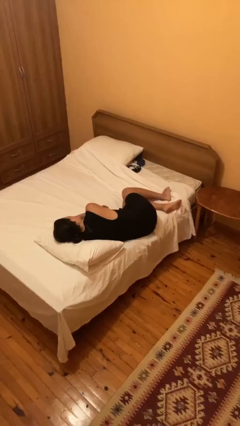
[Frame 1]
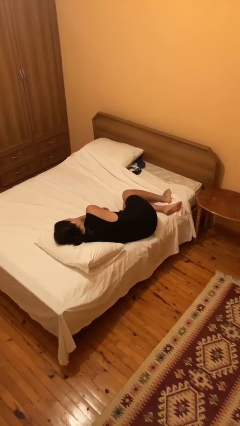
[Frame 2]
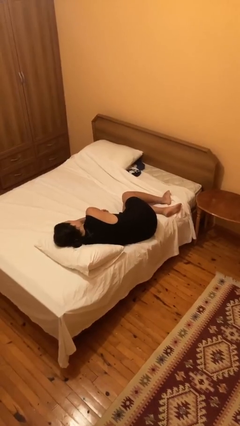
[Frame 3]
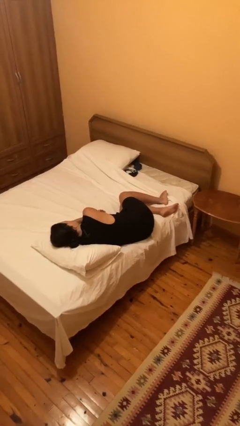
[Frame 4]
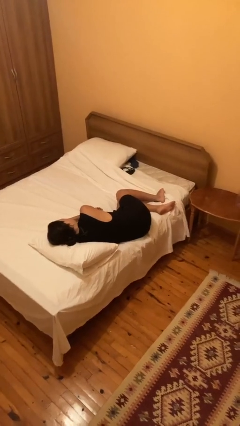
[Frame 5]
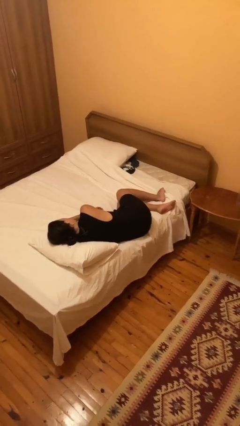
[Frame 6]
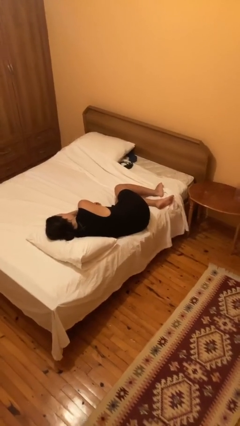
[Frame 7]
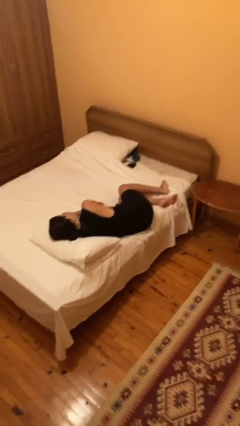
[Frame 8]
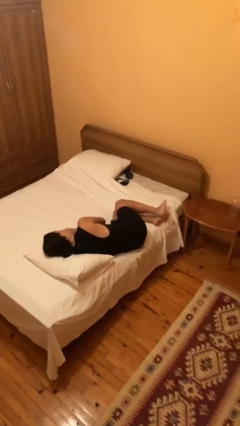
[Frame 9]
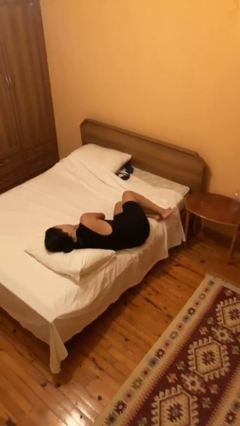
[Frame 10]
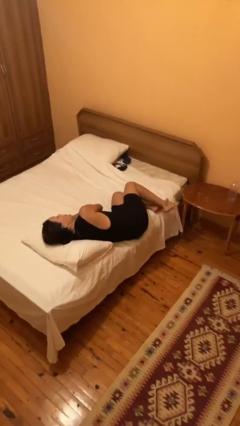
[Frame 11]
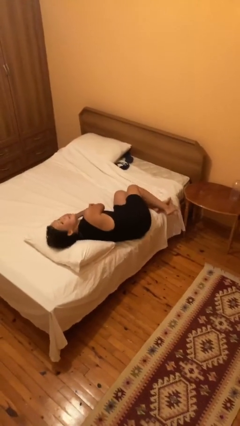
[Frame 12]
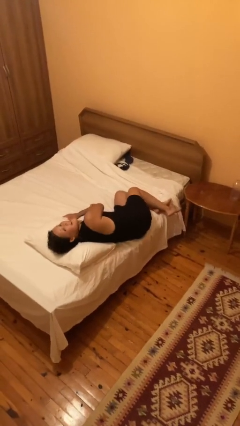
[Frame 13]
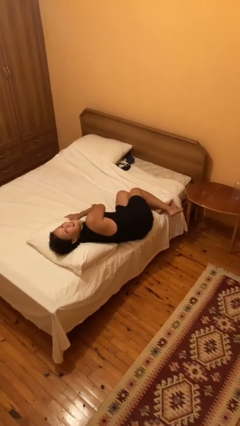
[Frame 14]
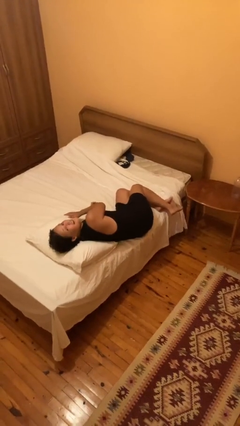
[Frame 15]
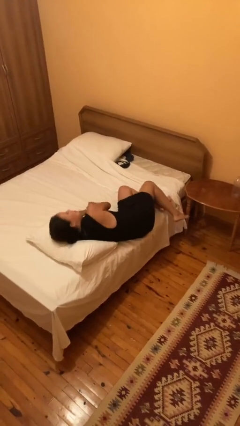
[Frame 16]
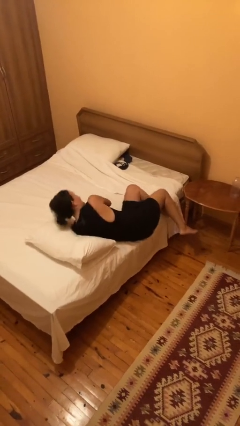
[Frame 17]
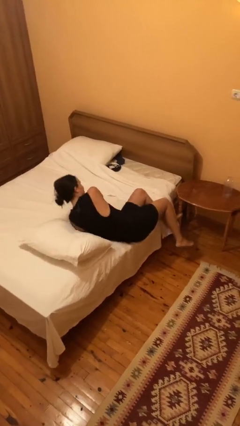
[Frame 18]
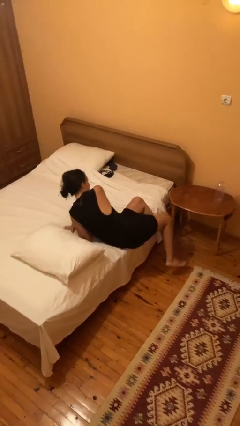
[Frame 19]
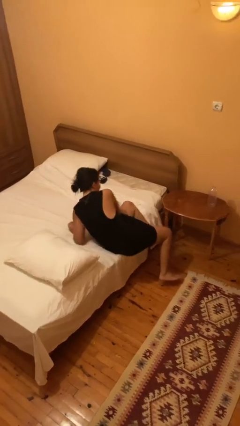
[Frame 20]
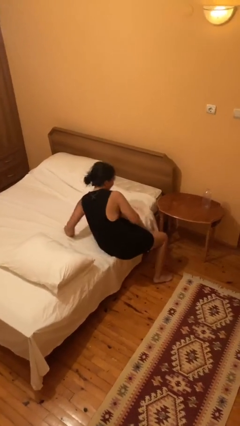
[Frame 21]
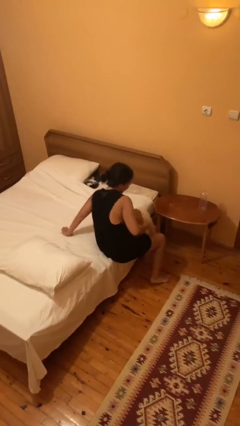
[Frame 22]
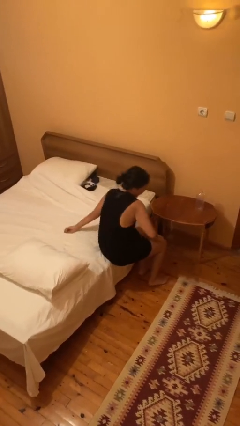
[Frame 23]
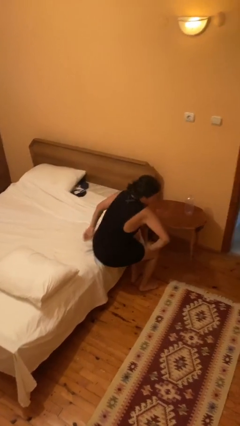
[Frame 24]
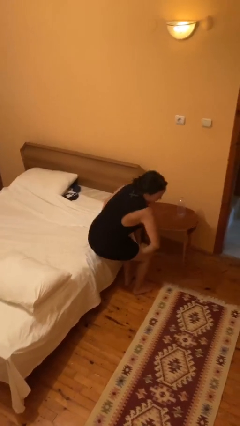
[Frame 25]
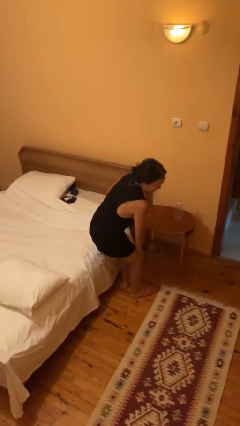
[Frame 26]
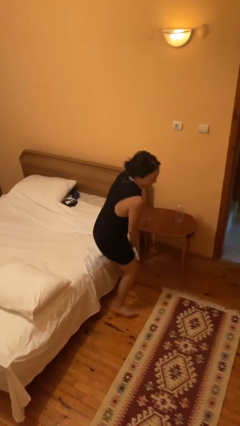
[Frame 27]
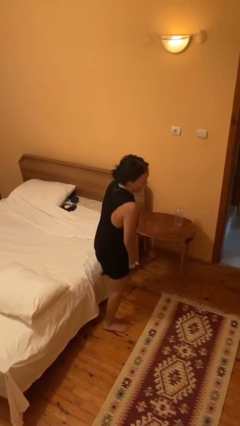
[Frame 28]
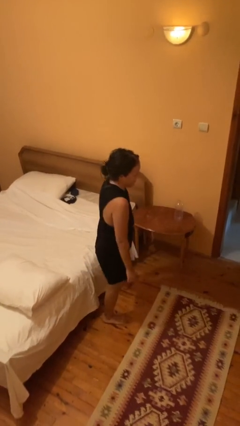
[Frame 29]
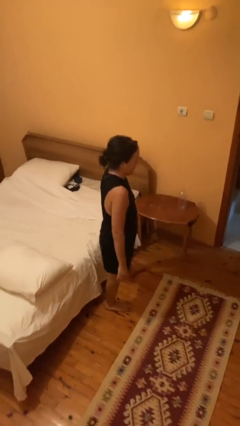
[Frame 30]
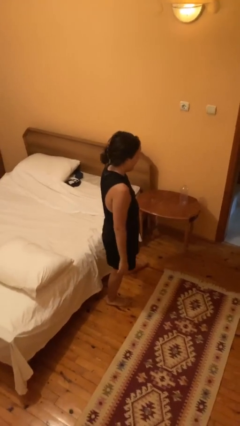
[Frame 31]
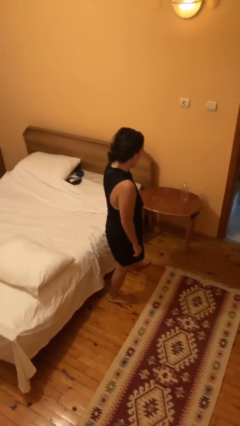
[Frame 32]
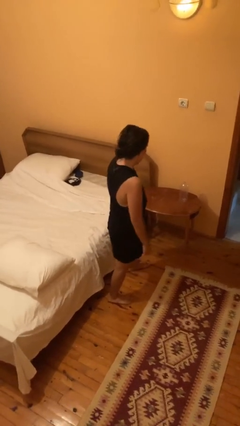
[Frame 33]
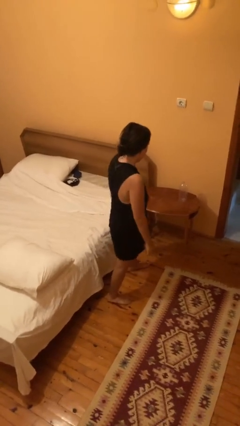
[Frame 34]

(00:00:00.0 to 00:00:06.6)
person stands up

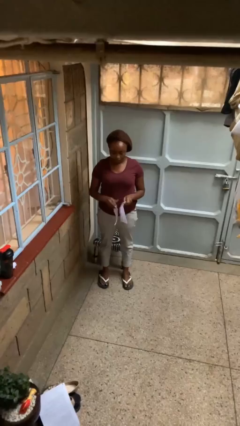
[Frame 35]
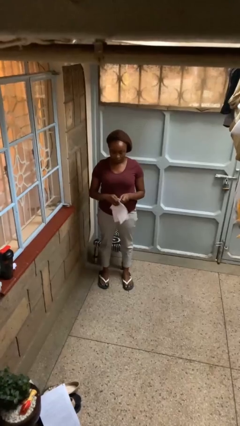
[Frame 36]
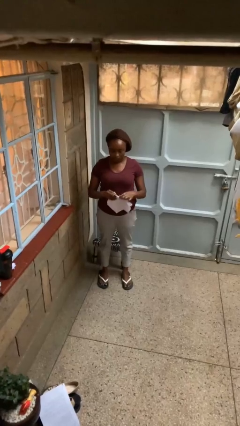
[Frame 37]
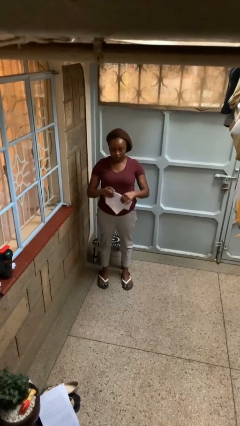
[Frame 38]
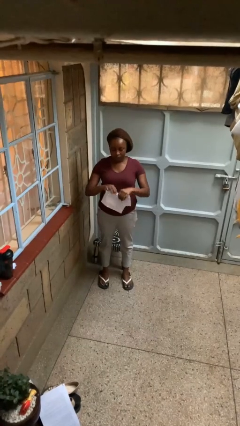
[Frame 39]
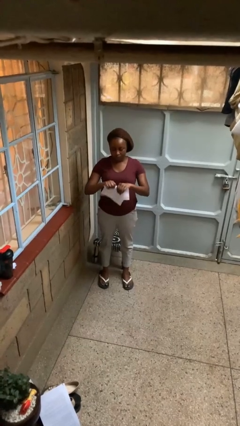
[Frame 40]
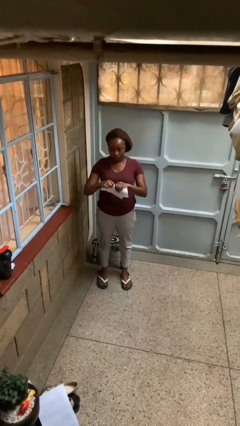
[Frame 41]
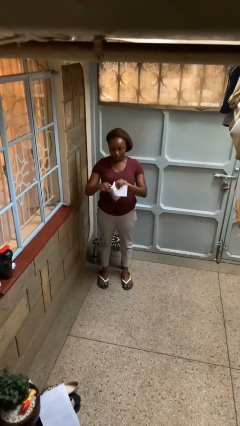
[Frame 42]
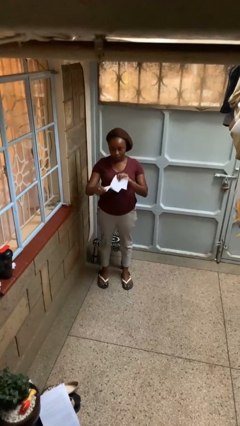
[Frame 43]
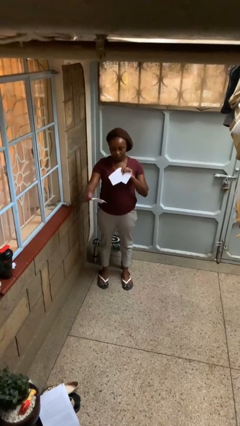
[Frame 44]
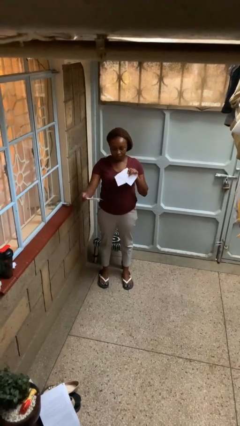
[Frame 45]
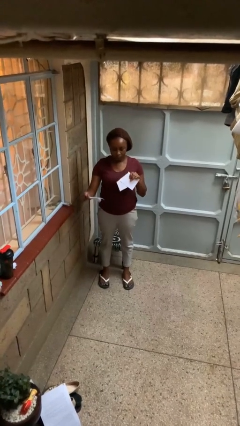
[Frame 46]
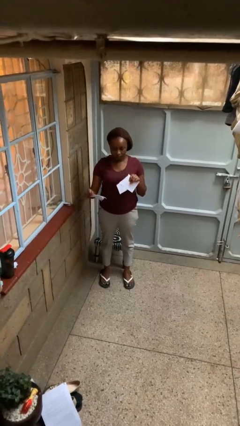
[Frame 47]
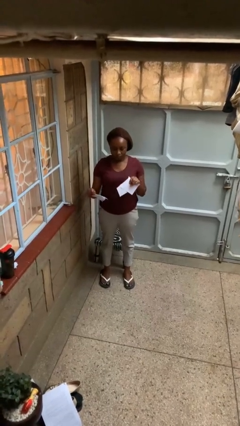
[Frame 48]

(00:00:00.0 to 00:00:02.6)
person tears paper

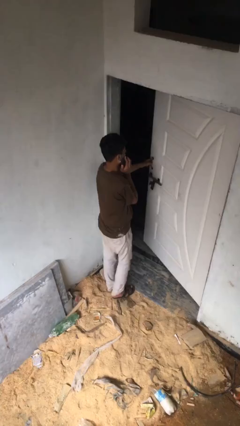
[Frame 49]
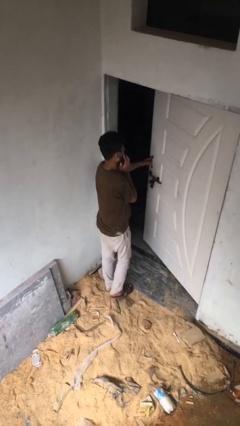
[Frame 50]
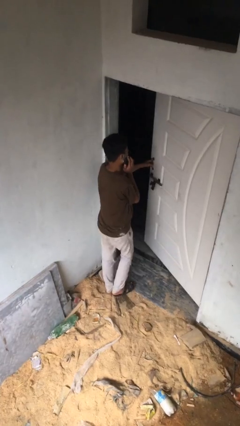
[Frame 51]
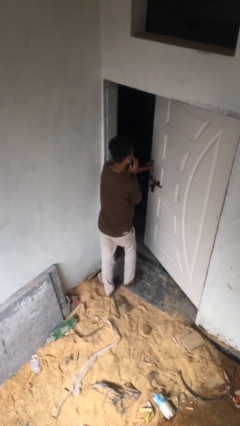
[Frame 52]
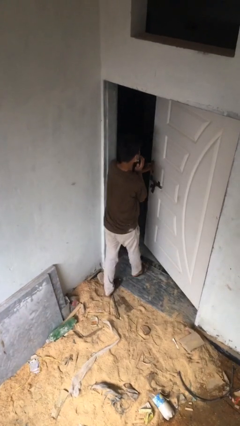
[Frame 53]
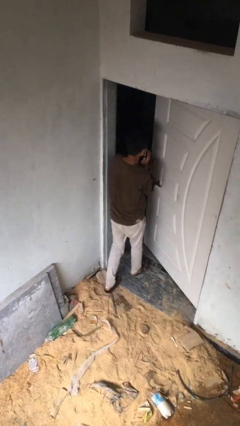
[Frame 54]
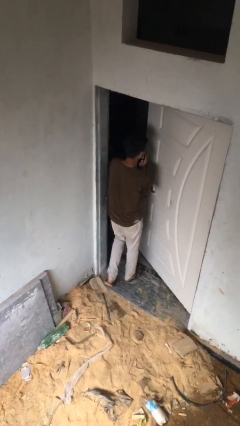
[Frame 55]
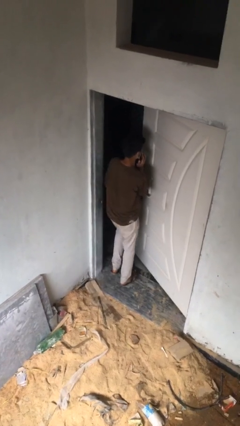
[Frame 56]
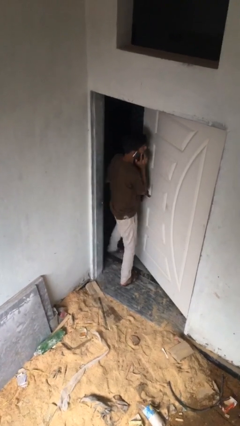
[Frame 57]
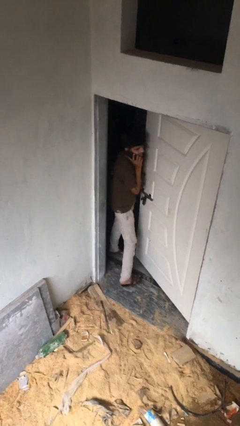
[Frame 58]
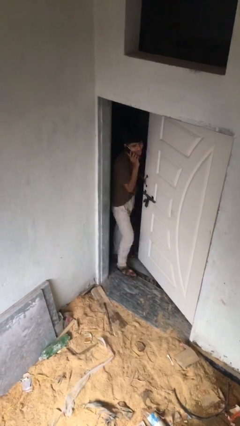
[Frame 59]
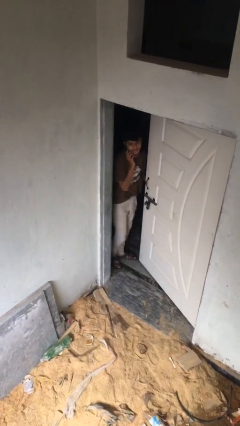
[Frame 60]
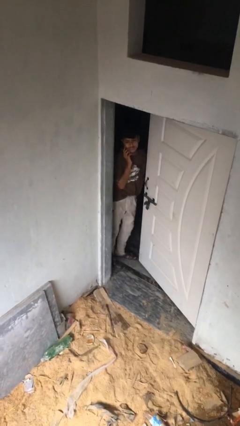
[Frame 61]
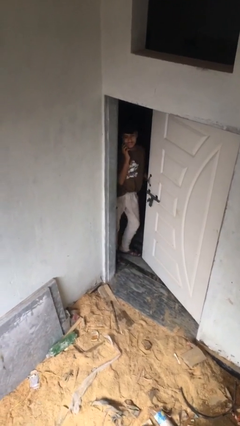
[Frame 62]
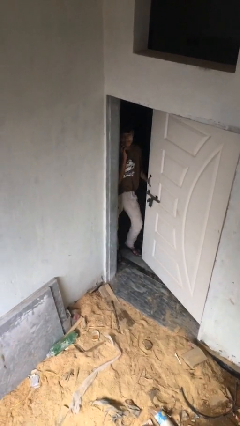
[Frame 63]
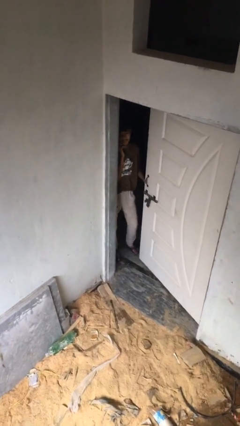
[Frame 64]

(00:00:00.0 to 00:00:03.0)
person exits scene through structure

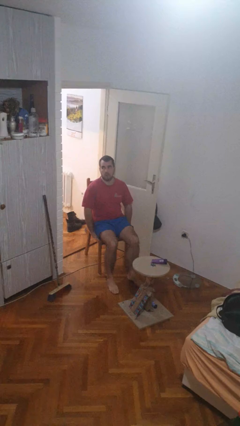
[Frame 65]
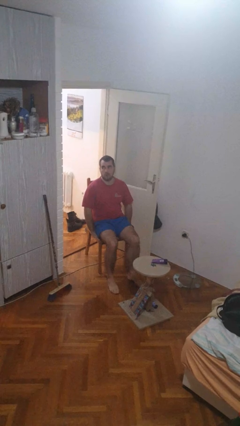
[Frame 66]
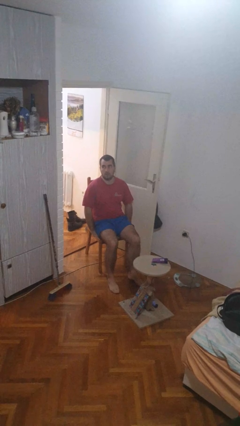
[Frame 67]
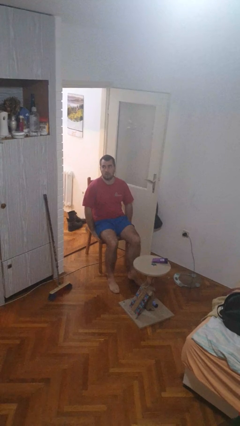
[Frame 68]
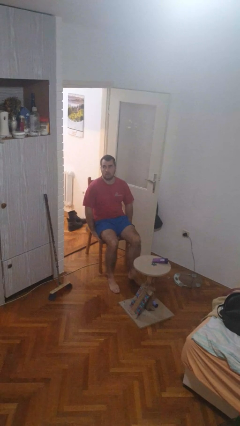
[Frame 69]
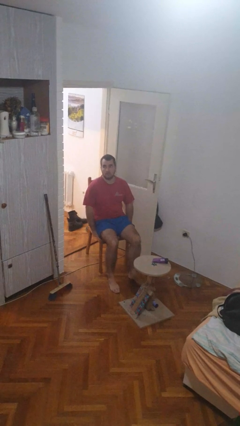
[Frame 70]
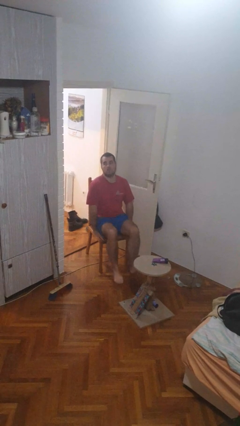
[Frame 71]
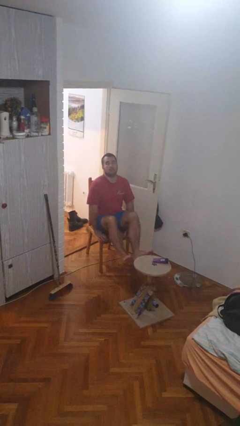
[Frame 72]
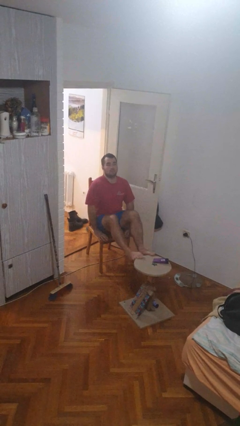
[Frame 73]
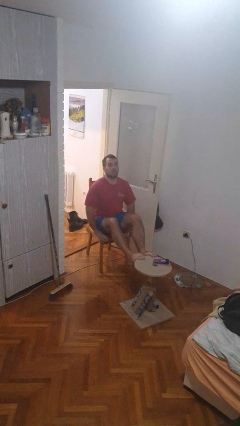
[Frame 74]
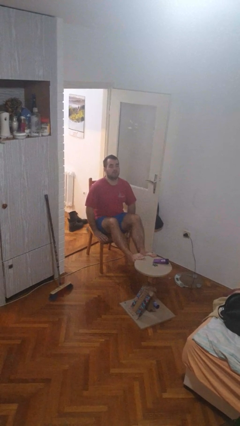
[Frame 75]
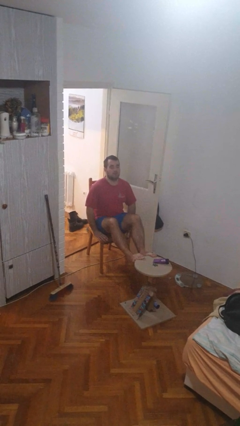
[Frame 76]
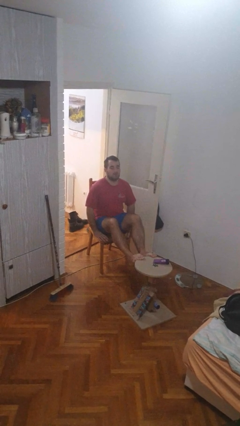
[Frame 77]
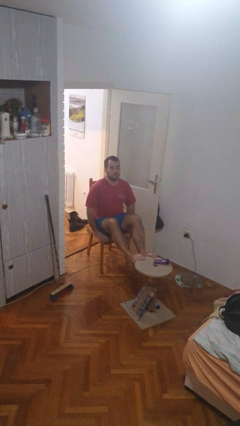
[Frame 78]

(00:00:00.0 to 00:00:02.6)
person puts feet up

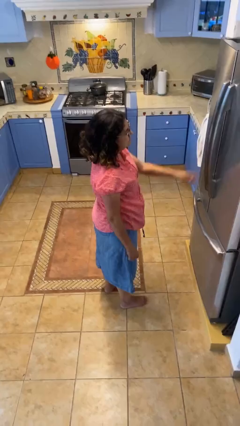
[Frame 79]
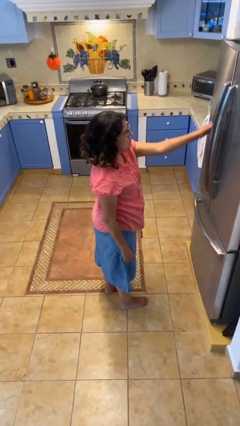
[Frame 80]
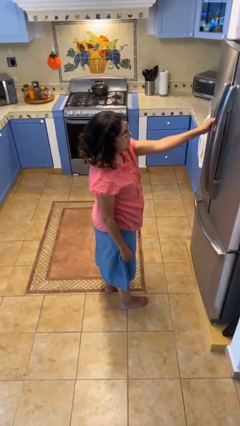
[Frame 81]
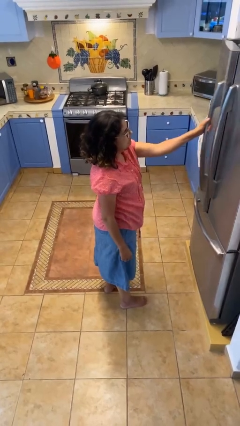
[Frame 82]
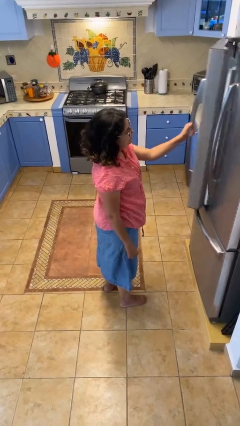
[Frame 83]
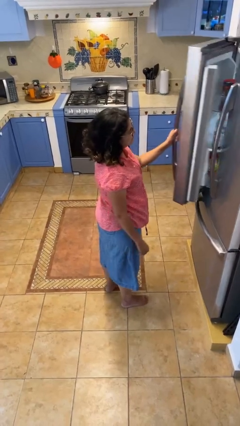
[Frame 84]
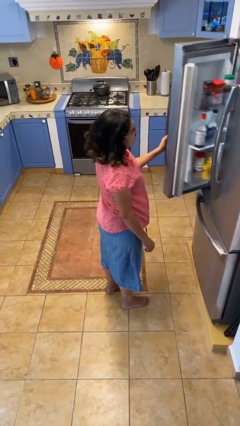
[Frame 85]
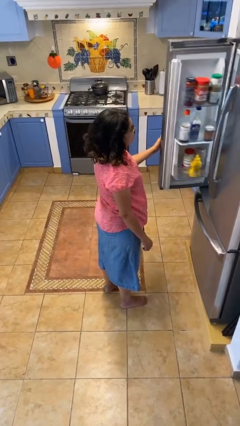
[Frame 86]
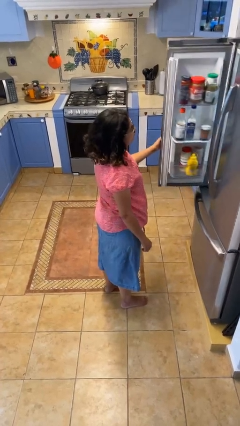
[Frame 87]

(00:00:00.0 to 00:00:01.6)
person opens refrigerator

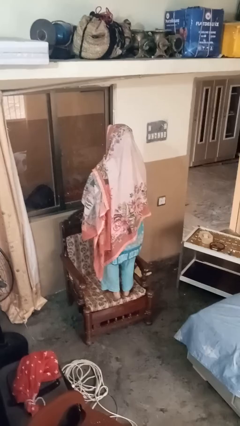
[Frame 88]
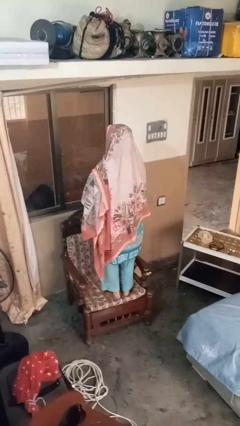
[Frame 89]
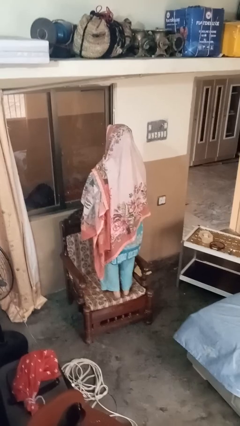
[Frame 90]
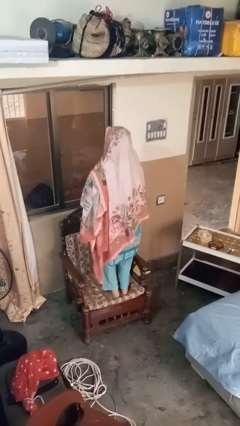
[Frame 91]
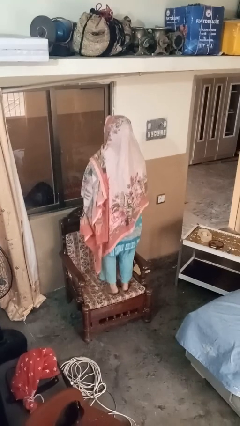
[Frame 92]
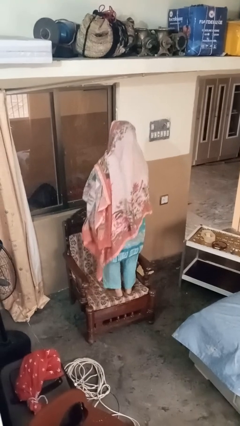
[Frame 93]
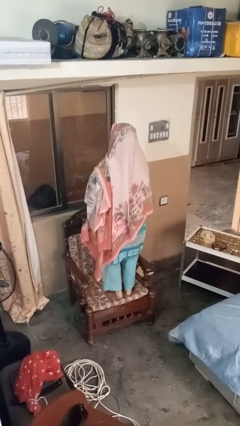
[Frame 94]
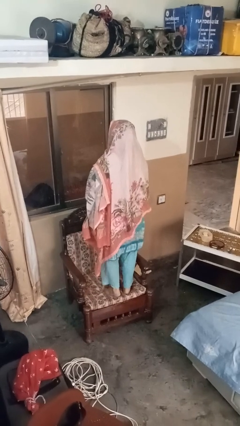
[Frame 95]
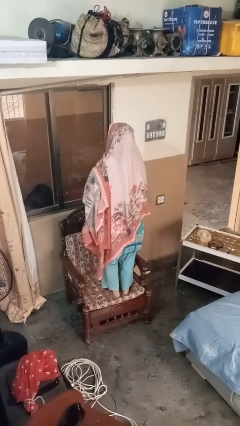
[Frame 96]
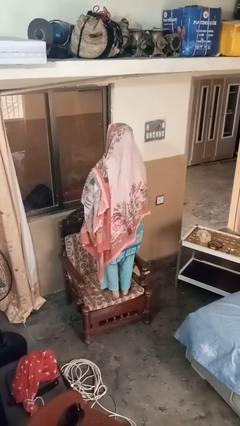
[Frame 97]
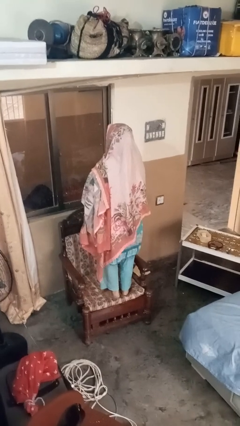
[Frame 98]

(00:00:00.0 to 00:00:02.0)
person jumps on couch
